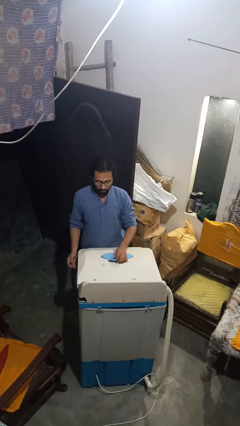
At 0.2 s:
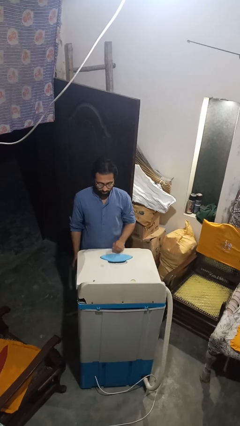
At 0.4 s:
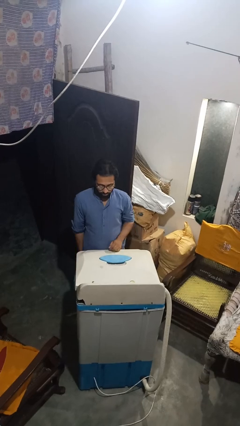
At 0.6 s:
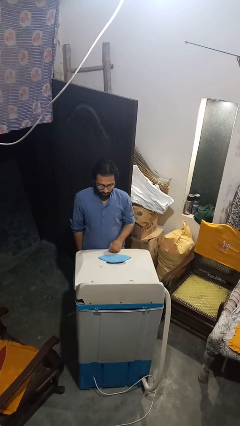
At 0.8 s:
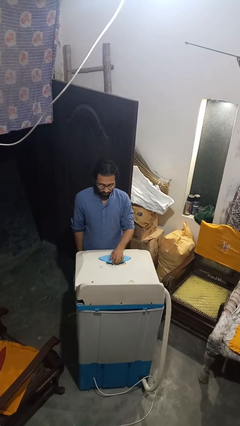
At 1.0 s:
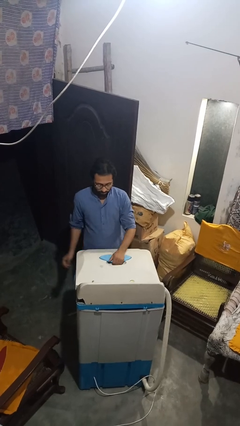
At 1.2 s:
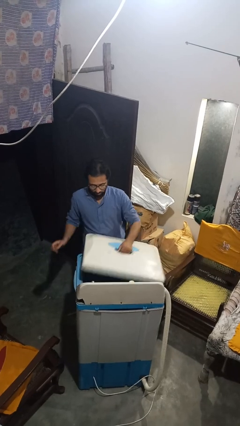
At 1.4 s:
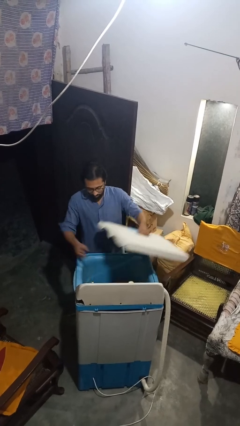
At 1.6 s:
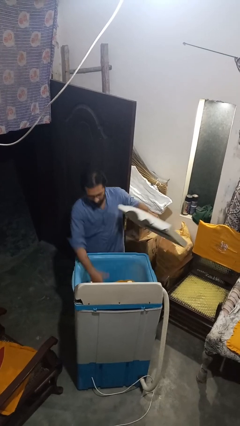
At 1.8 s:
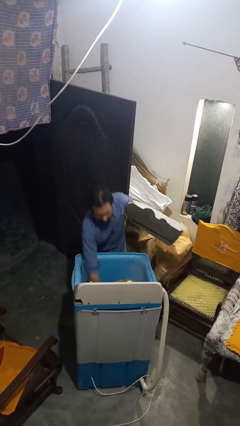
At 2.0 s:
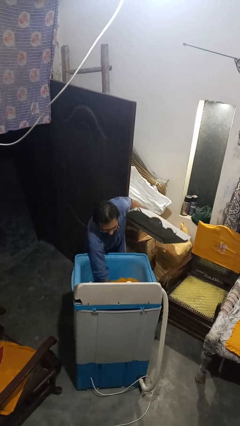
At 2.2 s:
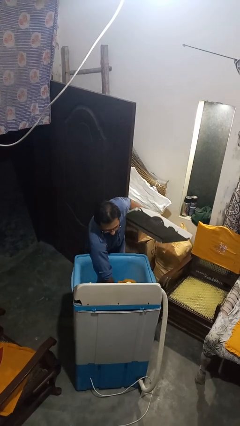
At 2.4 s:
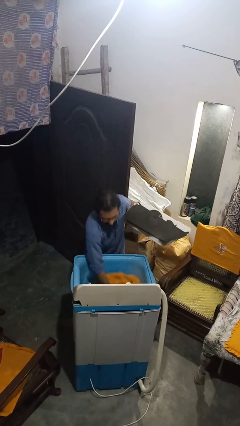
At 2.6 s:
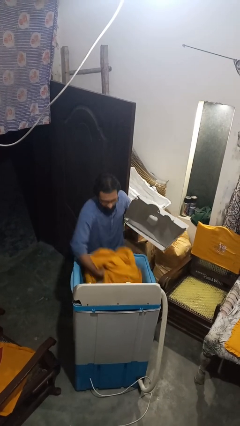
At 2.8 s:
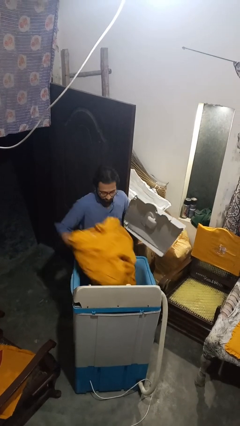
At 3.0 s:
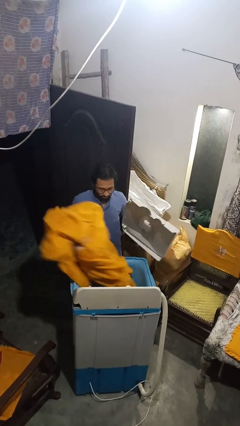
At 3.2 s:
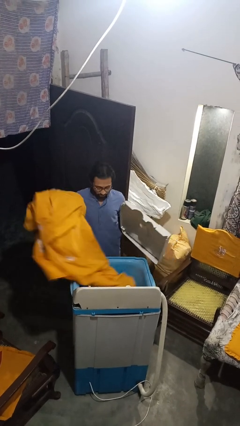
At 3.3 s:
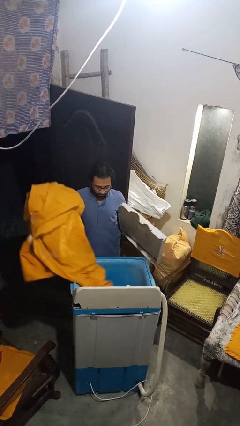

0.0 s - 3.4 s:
person opens clothes washer

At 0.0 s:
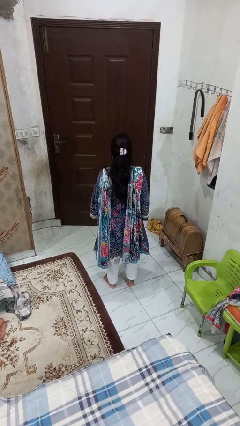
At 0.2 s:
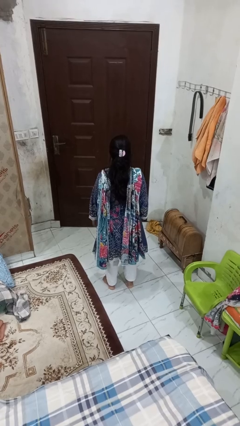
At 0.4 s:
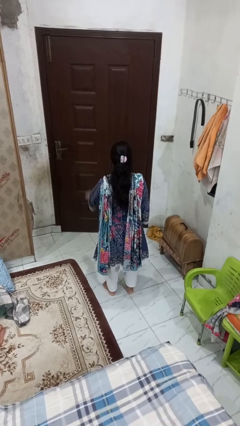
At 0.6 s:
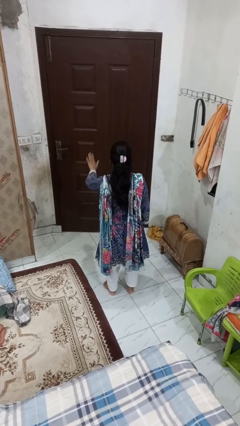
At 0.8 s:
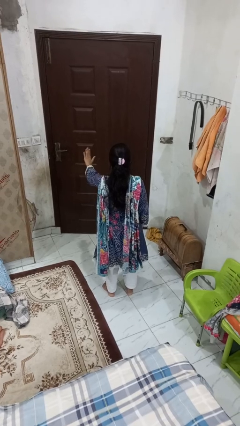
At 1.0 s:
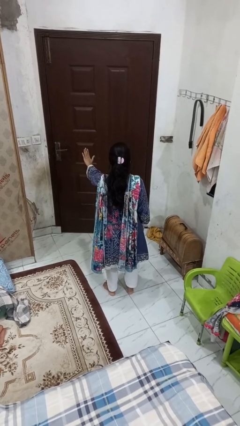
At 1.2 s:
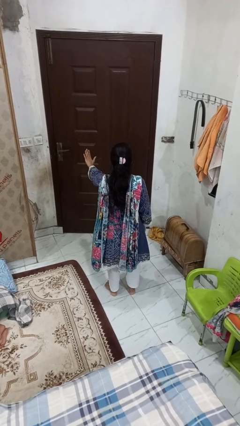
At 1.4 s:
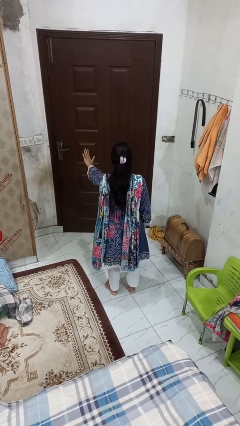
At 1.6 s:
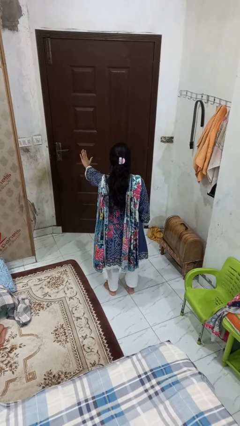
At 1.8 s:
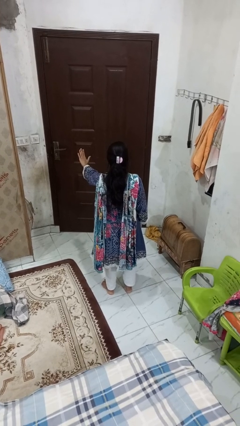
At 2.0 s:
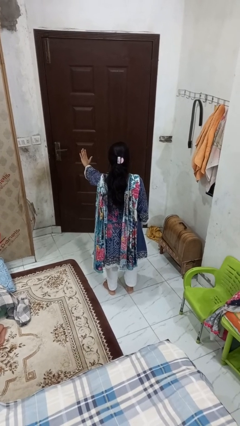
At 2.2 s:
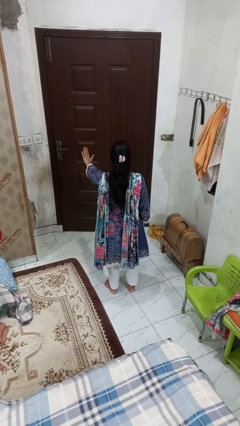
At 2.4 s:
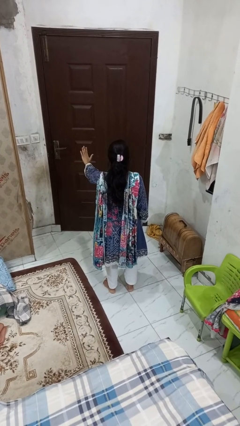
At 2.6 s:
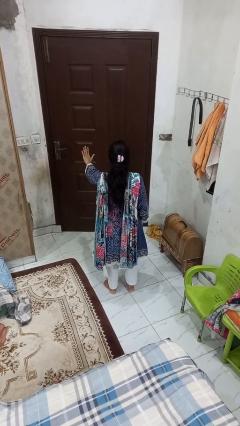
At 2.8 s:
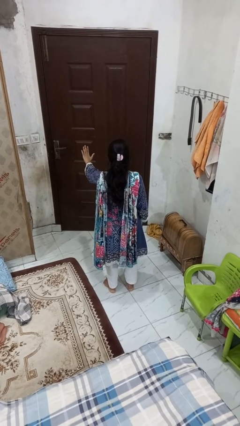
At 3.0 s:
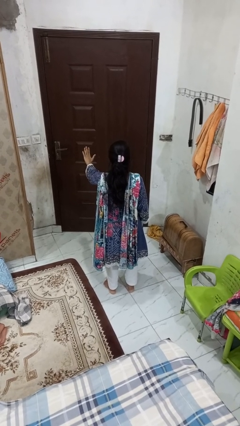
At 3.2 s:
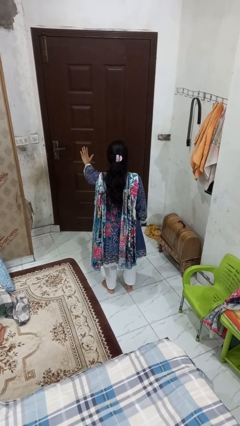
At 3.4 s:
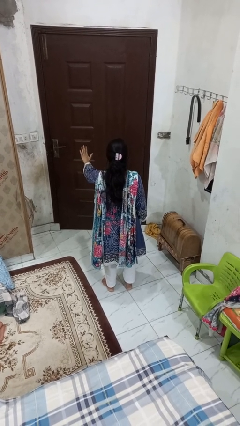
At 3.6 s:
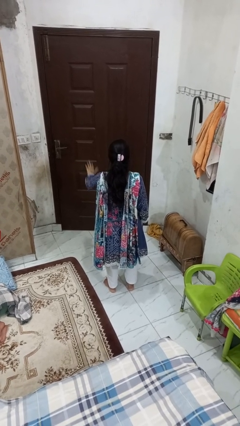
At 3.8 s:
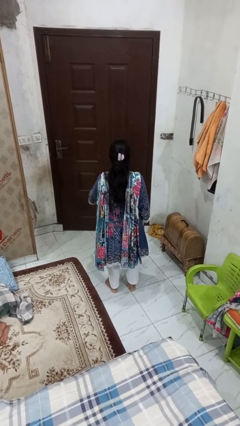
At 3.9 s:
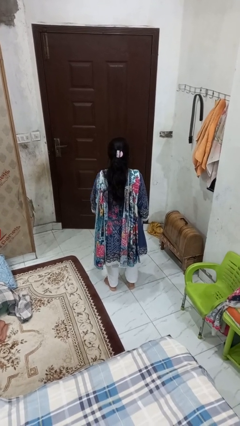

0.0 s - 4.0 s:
person gestures stop

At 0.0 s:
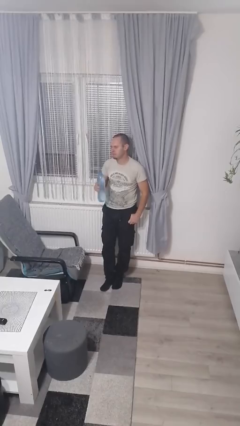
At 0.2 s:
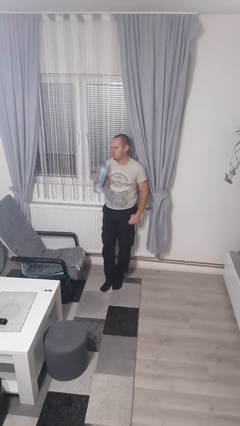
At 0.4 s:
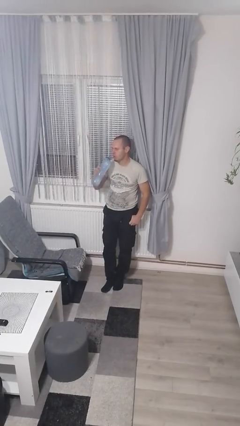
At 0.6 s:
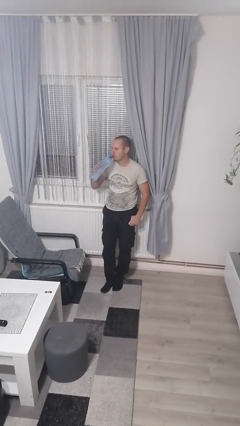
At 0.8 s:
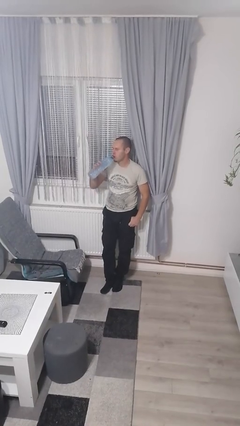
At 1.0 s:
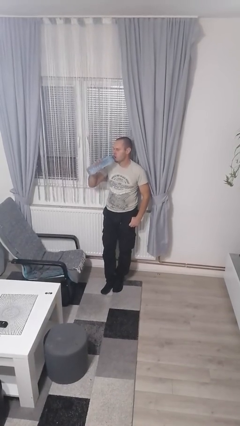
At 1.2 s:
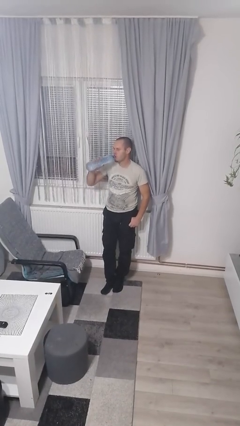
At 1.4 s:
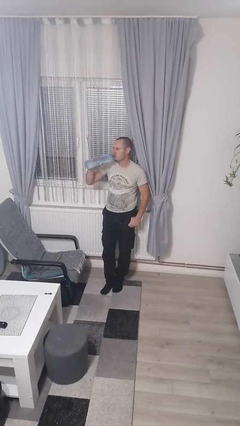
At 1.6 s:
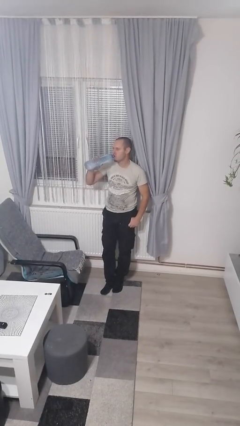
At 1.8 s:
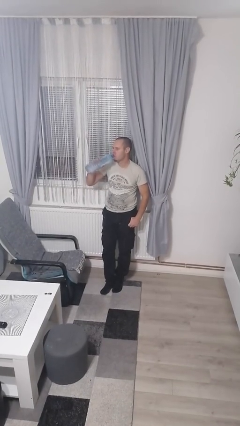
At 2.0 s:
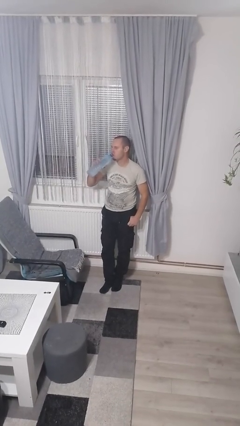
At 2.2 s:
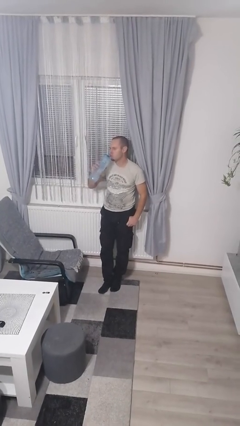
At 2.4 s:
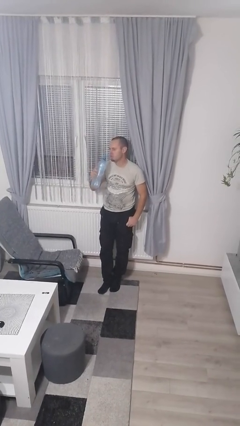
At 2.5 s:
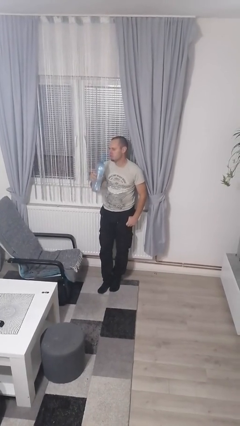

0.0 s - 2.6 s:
person drinks from bottle

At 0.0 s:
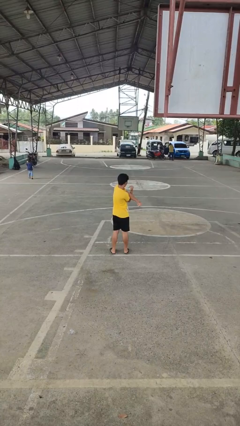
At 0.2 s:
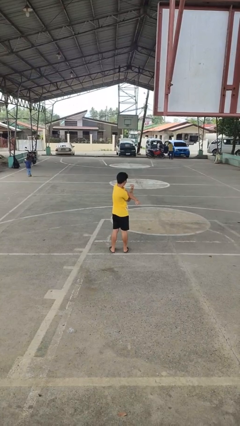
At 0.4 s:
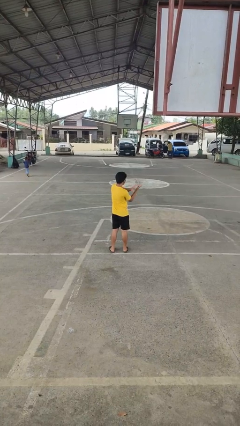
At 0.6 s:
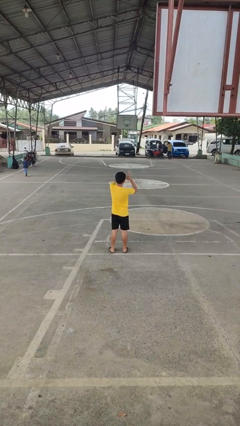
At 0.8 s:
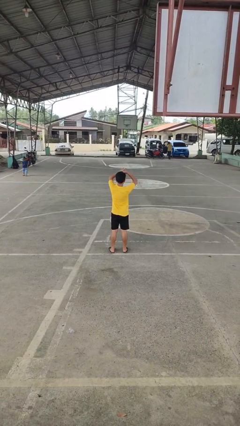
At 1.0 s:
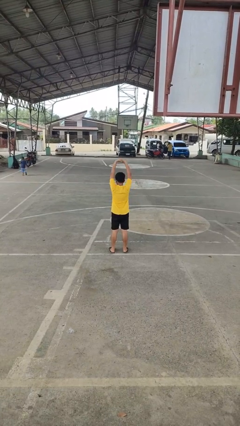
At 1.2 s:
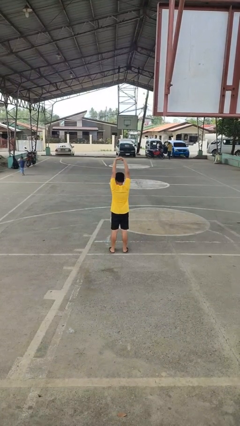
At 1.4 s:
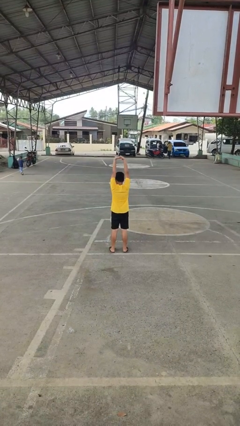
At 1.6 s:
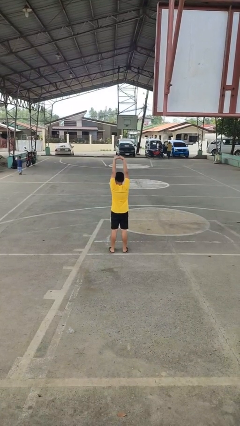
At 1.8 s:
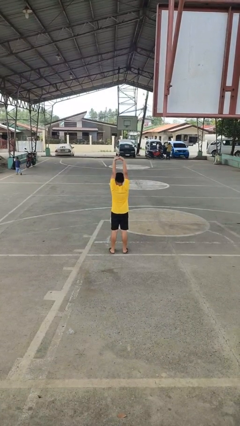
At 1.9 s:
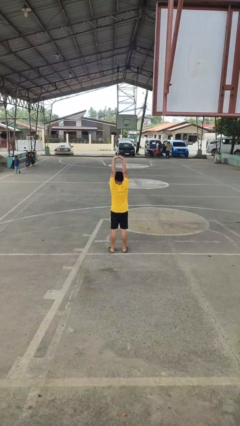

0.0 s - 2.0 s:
person stretches arms over head

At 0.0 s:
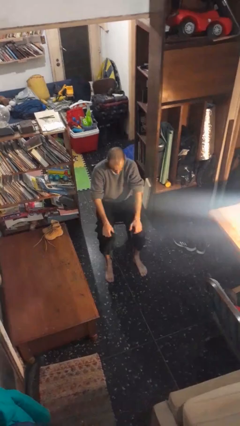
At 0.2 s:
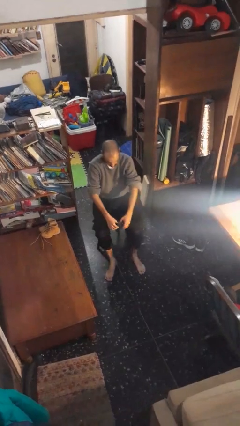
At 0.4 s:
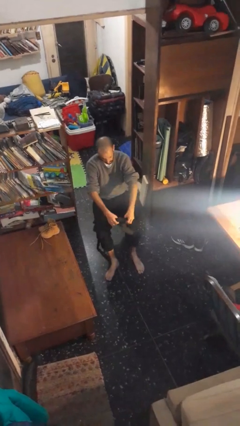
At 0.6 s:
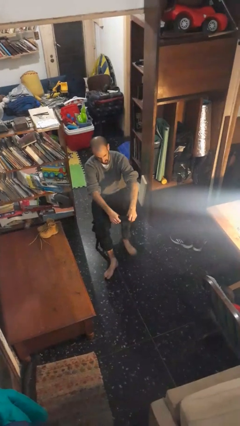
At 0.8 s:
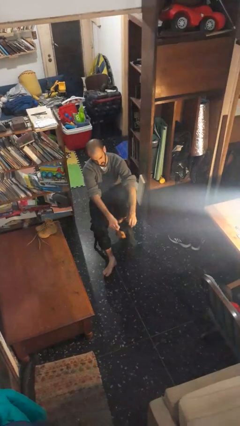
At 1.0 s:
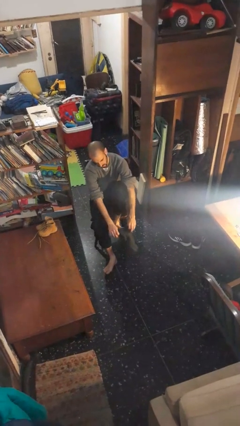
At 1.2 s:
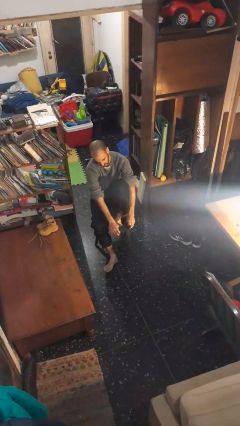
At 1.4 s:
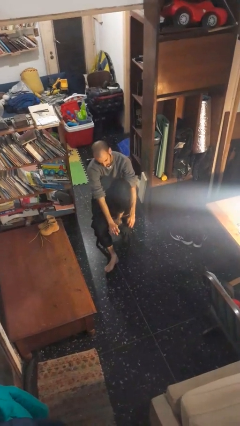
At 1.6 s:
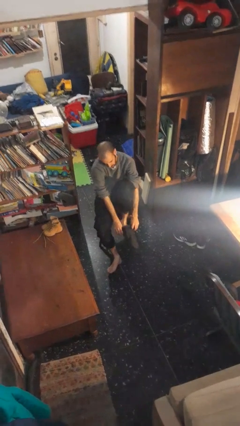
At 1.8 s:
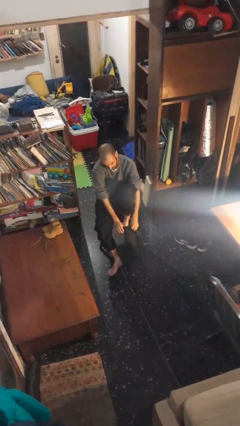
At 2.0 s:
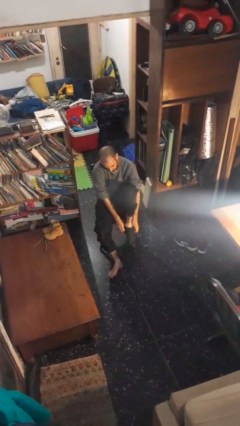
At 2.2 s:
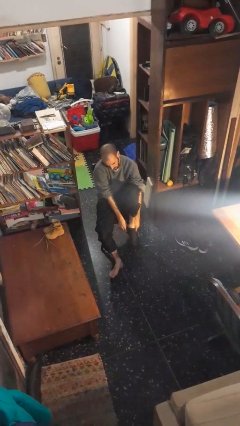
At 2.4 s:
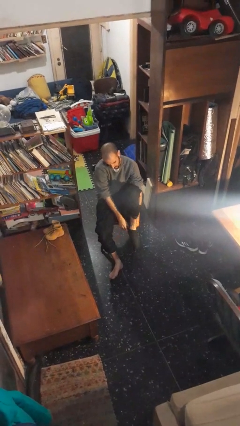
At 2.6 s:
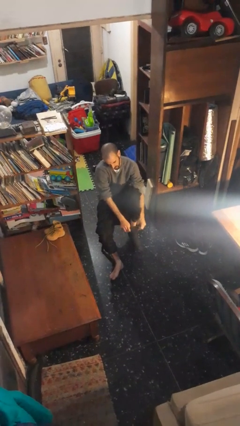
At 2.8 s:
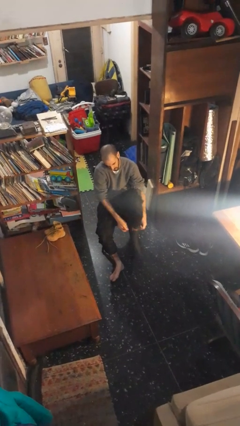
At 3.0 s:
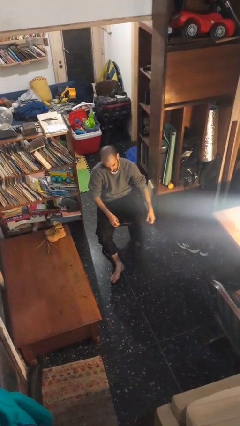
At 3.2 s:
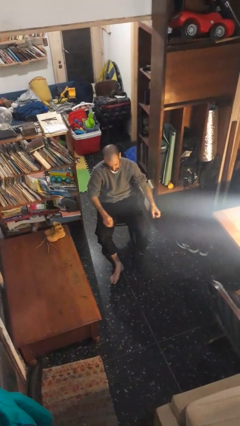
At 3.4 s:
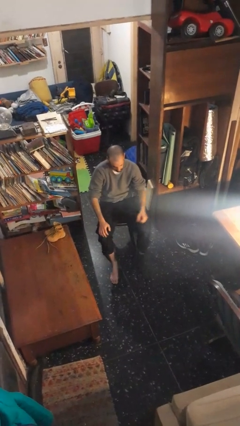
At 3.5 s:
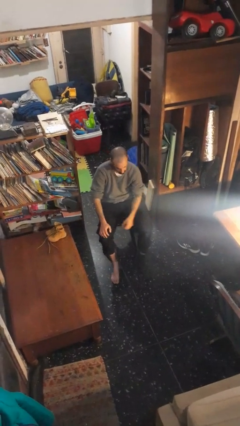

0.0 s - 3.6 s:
person puts on socks

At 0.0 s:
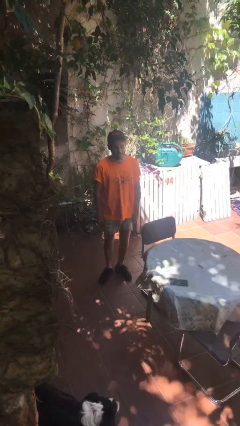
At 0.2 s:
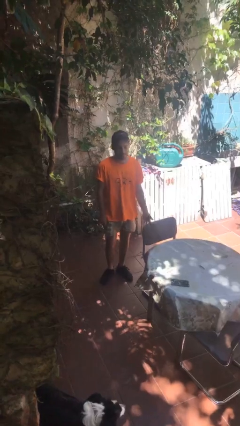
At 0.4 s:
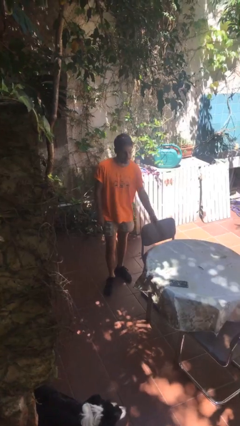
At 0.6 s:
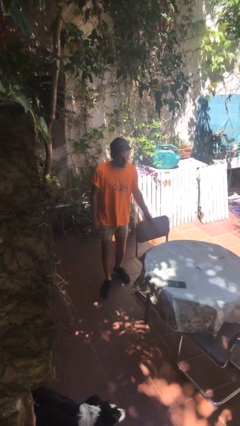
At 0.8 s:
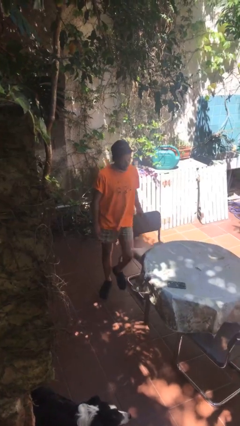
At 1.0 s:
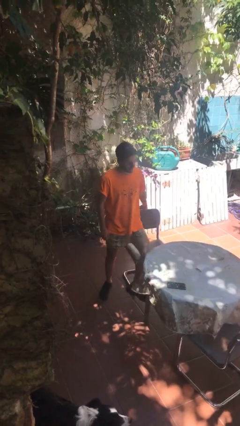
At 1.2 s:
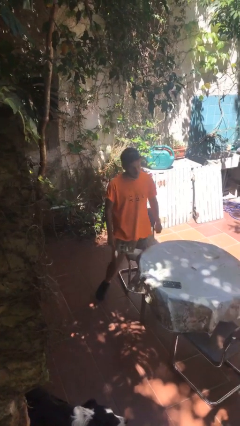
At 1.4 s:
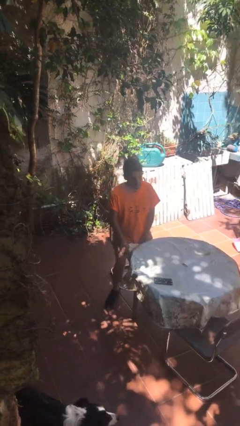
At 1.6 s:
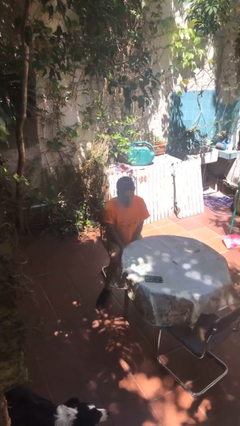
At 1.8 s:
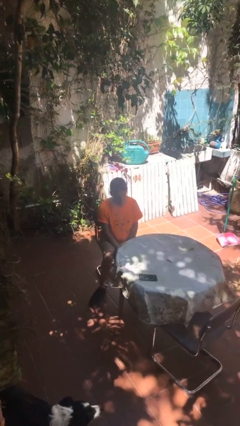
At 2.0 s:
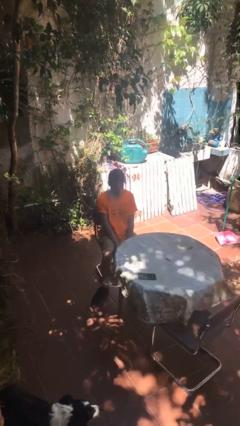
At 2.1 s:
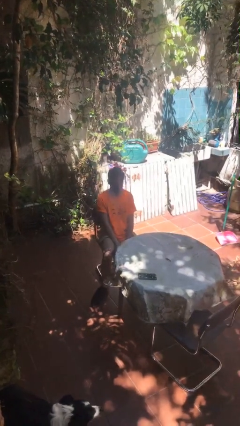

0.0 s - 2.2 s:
person sits down
